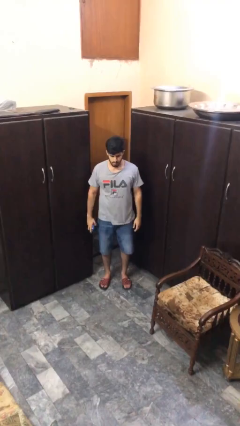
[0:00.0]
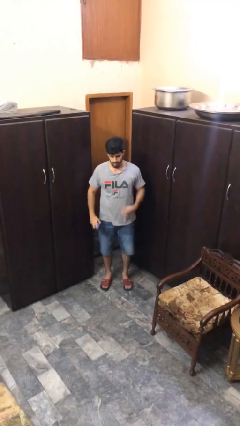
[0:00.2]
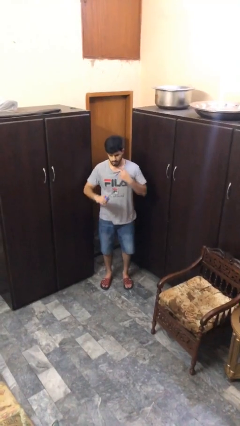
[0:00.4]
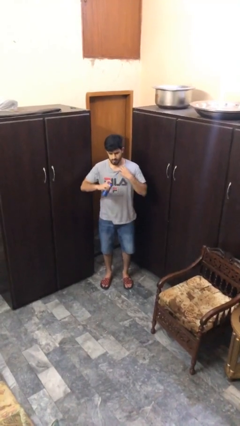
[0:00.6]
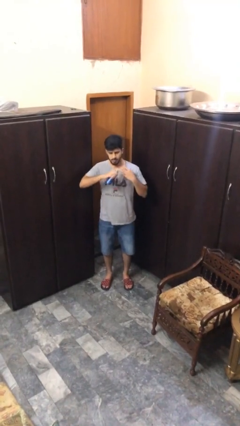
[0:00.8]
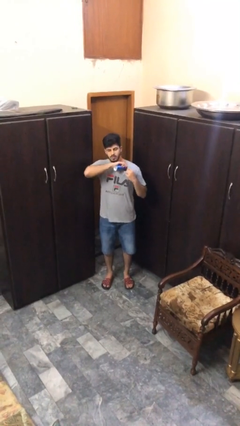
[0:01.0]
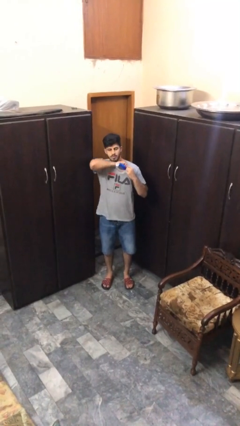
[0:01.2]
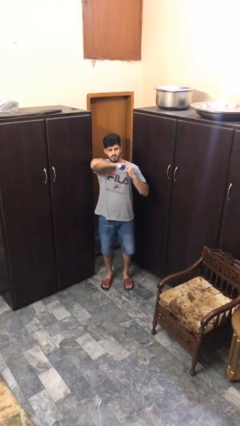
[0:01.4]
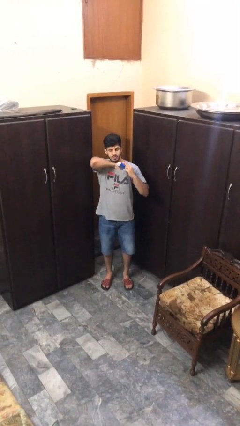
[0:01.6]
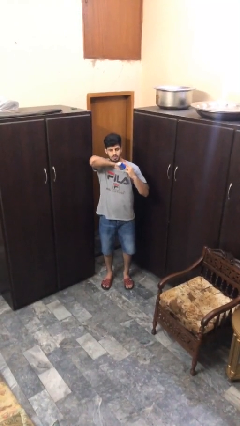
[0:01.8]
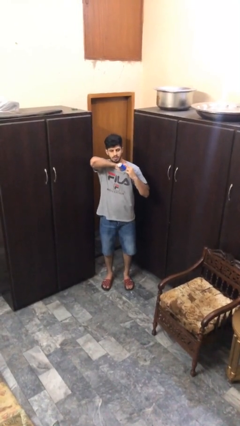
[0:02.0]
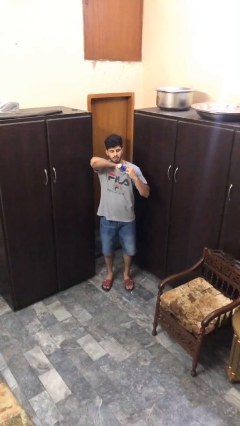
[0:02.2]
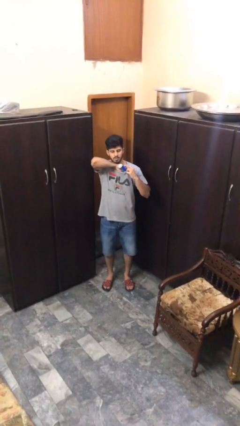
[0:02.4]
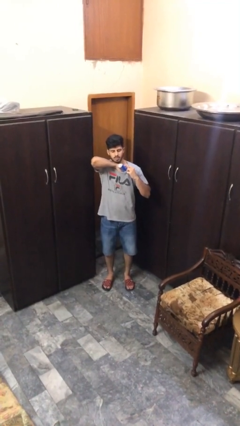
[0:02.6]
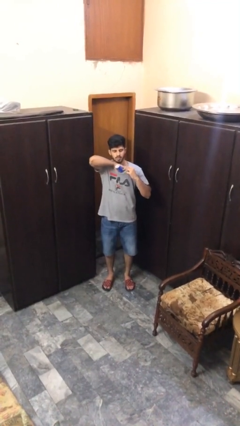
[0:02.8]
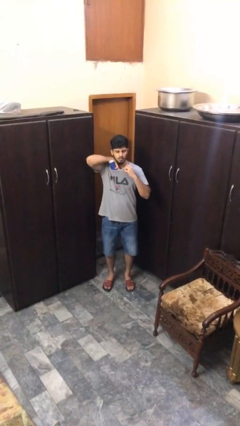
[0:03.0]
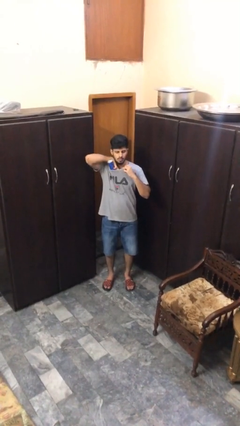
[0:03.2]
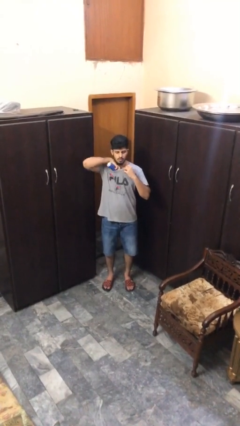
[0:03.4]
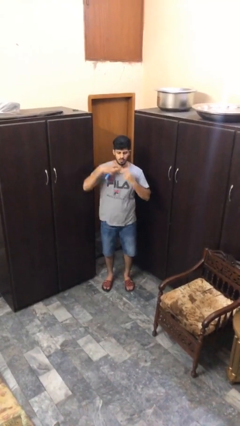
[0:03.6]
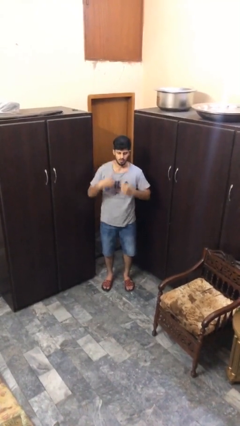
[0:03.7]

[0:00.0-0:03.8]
person applies deodorant

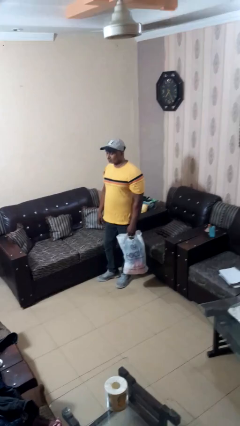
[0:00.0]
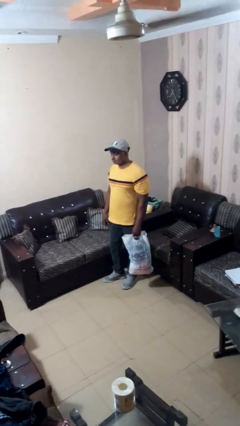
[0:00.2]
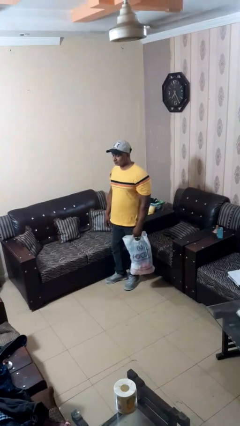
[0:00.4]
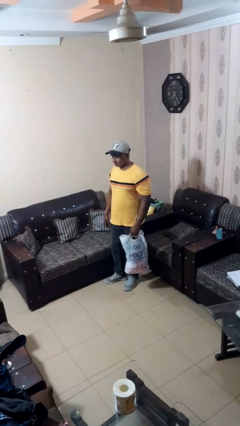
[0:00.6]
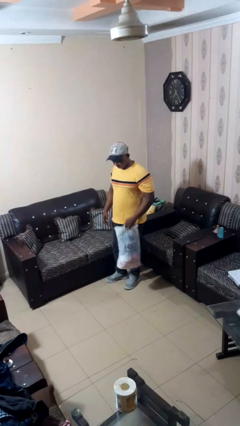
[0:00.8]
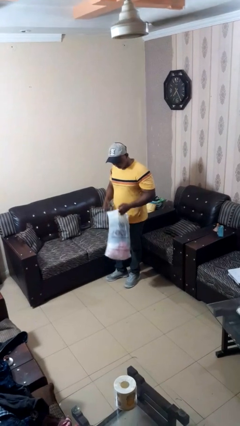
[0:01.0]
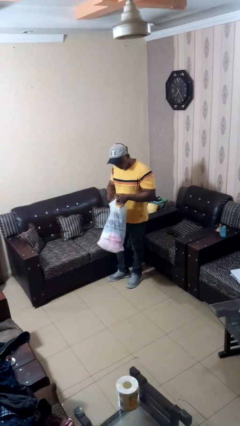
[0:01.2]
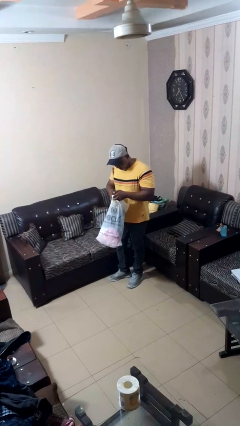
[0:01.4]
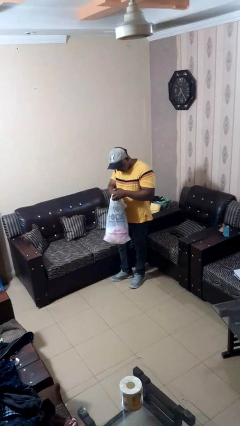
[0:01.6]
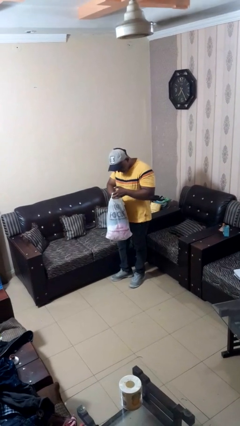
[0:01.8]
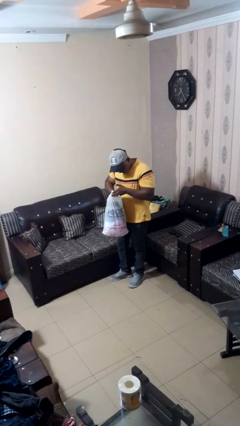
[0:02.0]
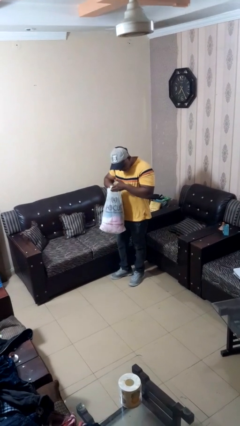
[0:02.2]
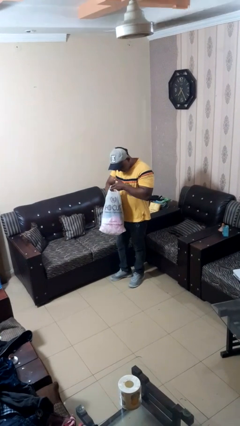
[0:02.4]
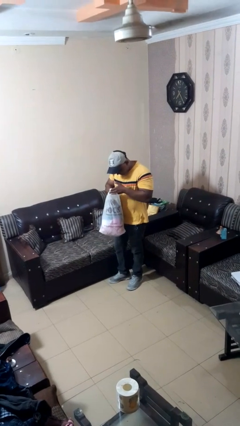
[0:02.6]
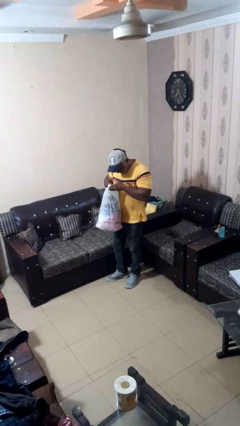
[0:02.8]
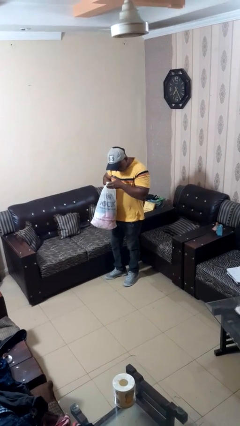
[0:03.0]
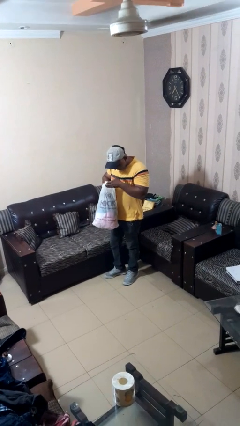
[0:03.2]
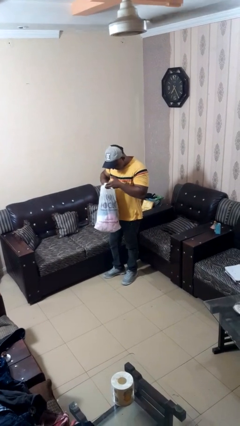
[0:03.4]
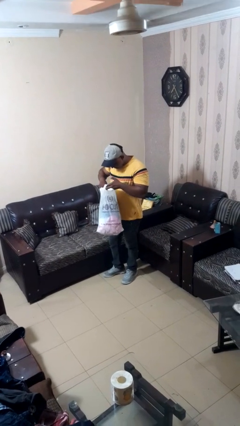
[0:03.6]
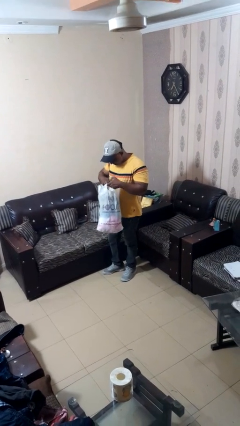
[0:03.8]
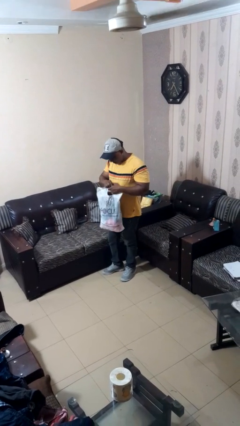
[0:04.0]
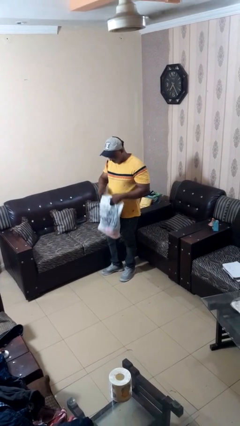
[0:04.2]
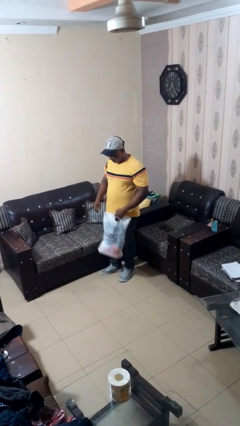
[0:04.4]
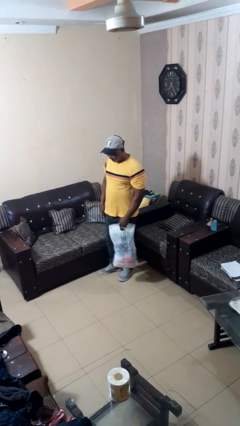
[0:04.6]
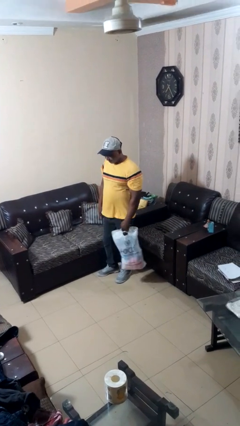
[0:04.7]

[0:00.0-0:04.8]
person searches in bag

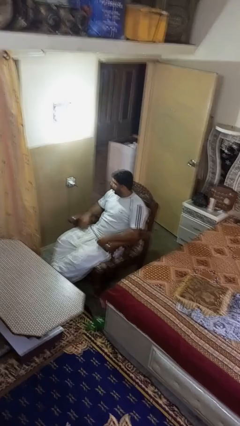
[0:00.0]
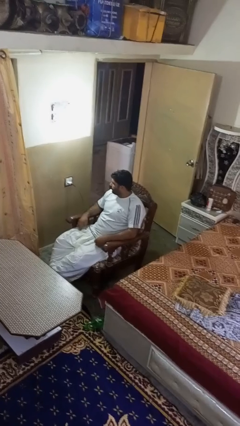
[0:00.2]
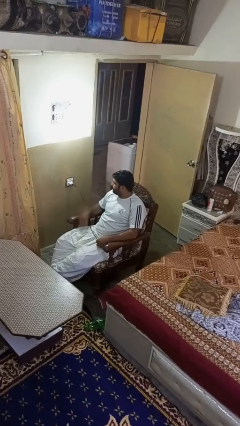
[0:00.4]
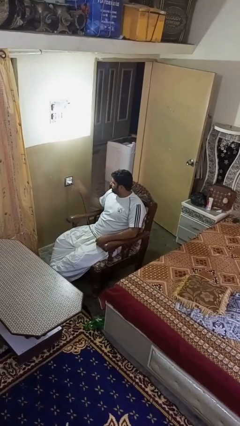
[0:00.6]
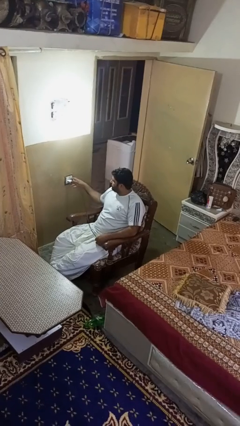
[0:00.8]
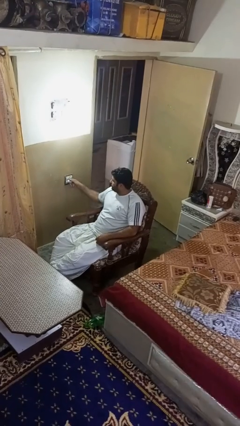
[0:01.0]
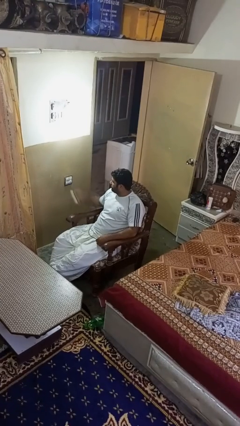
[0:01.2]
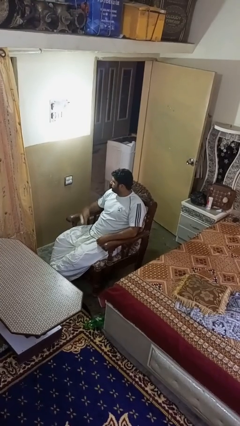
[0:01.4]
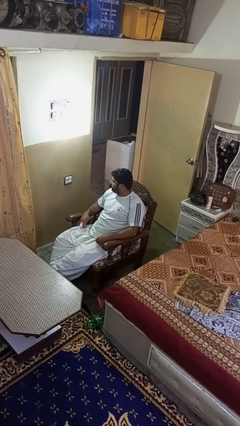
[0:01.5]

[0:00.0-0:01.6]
person unplugs from electrical socket

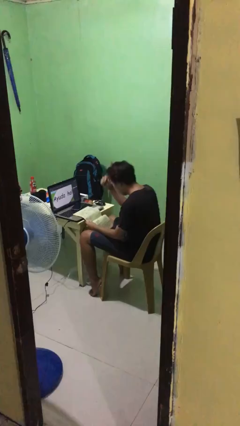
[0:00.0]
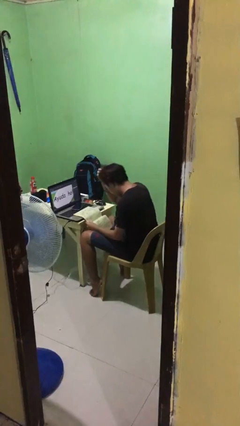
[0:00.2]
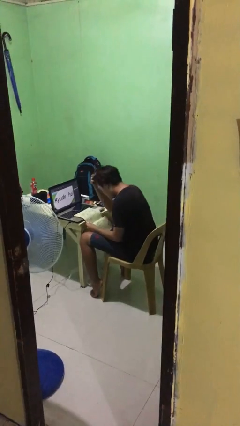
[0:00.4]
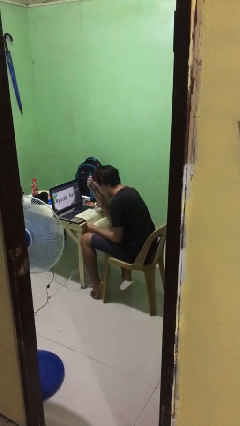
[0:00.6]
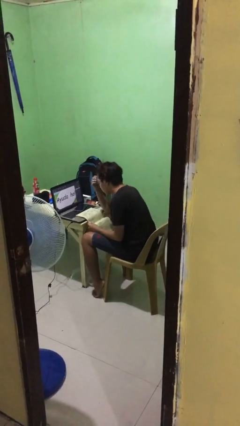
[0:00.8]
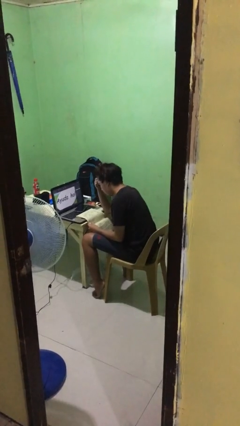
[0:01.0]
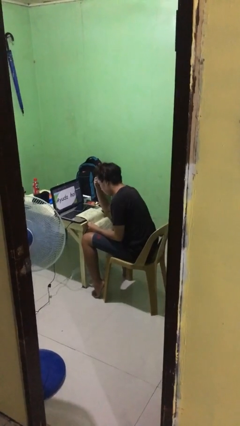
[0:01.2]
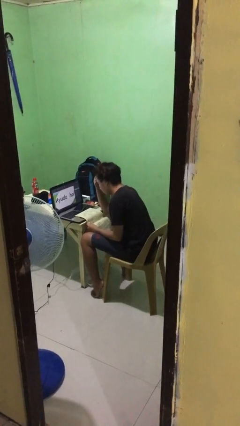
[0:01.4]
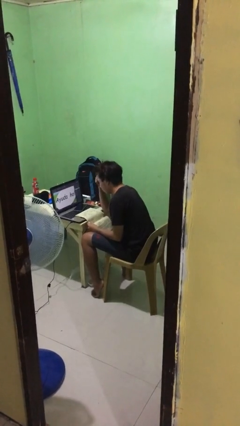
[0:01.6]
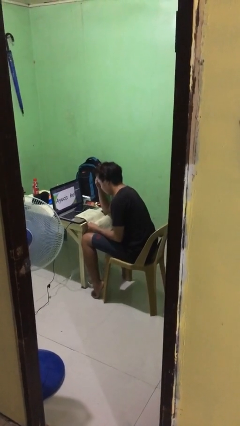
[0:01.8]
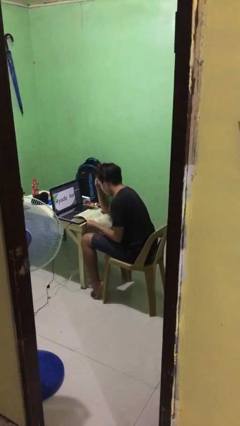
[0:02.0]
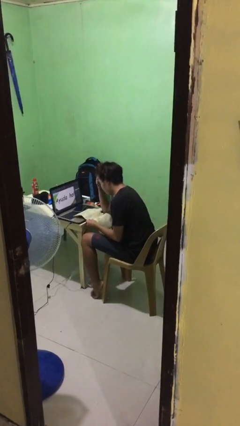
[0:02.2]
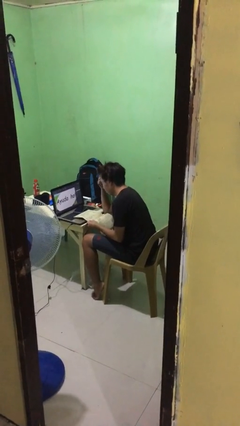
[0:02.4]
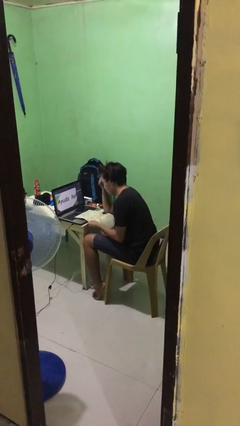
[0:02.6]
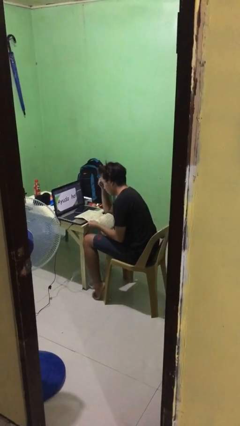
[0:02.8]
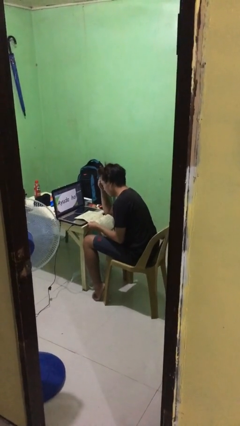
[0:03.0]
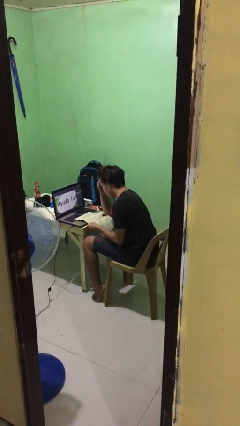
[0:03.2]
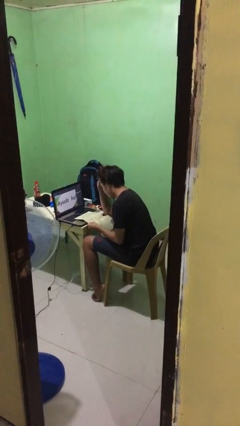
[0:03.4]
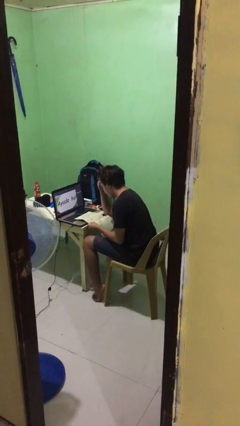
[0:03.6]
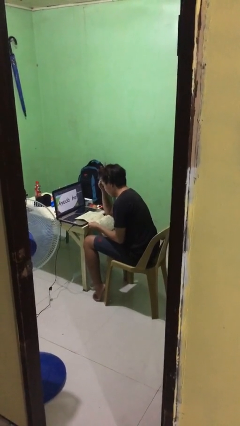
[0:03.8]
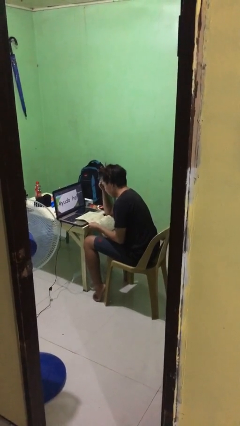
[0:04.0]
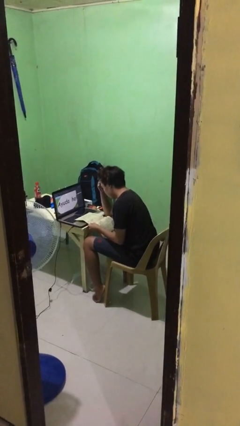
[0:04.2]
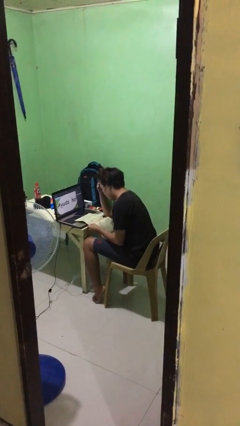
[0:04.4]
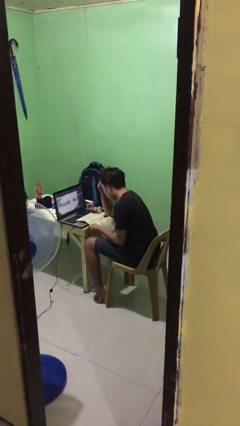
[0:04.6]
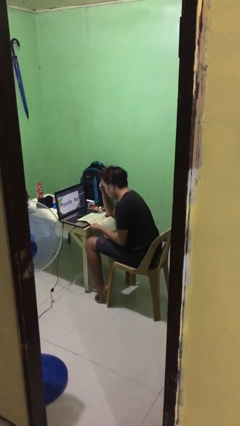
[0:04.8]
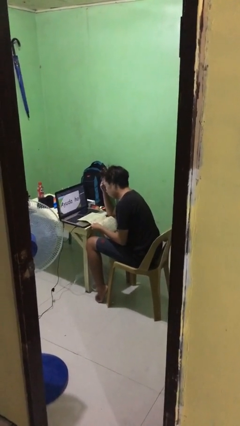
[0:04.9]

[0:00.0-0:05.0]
person reads document

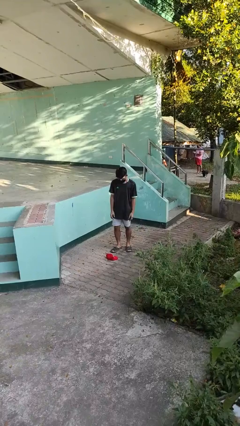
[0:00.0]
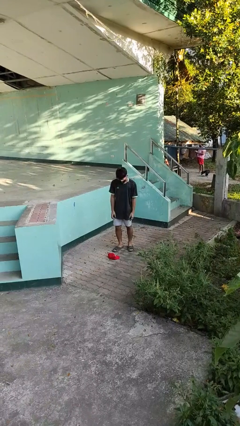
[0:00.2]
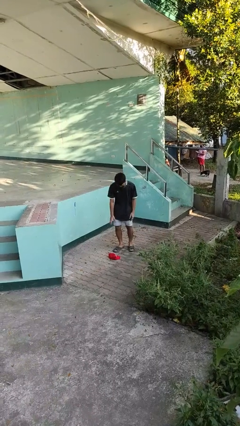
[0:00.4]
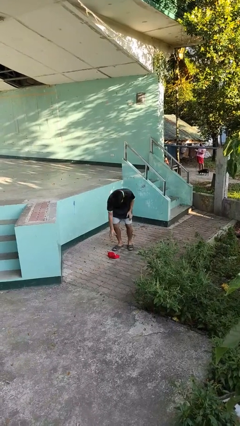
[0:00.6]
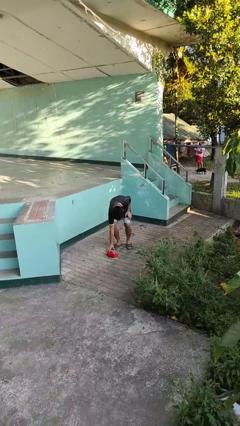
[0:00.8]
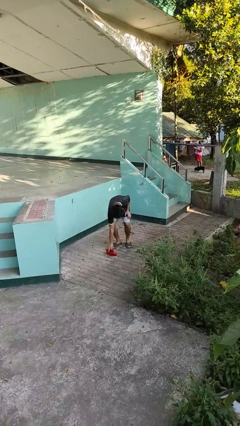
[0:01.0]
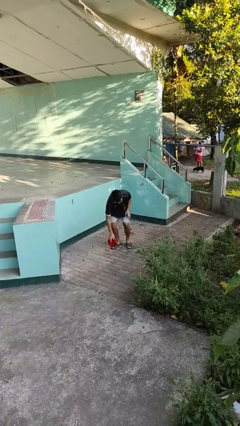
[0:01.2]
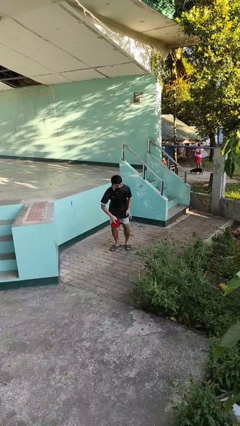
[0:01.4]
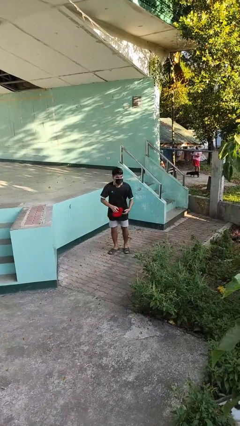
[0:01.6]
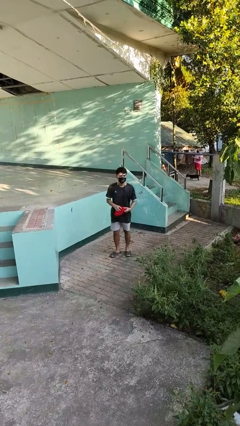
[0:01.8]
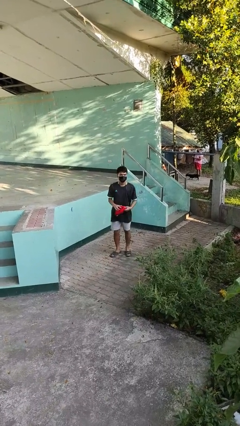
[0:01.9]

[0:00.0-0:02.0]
person picks up object from floor

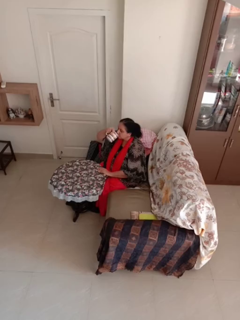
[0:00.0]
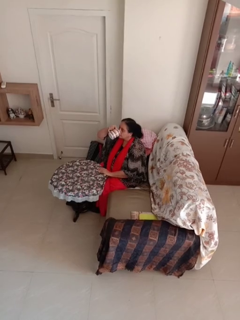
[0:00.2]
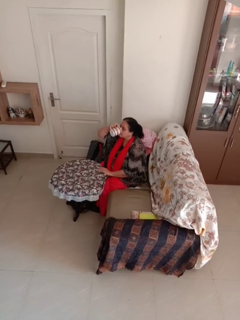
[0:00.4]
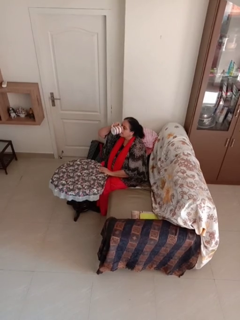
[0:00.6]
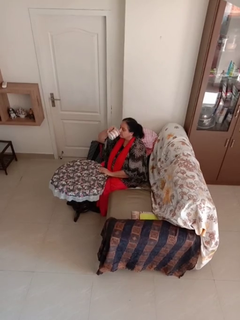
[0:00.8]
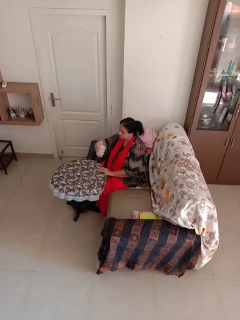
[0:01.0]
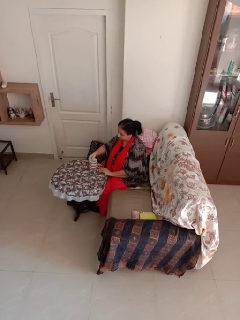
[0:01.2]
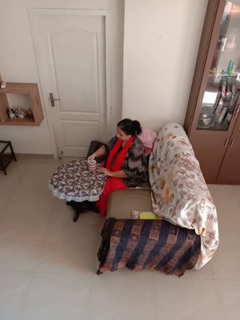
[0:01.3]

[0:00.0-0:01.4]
person drinks from mug
